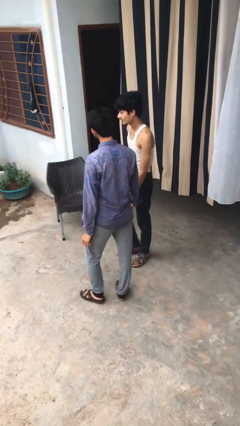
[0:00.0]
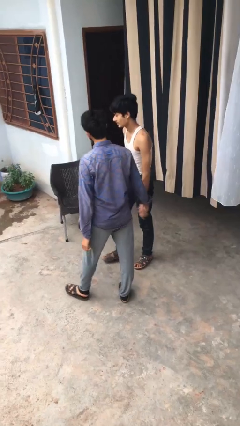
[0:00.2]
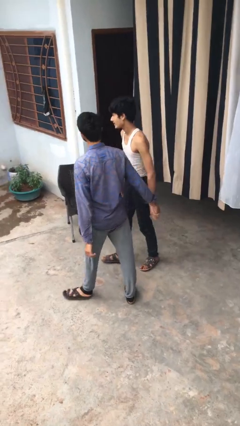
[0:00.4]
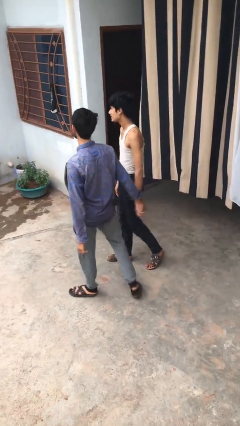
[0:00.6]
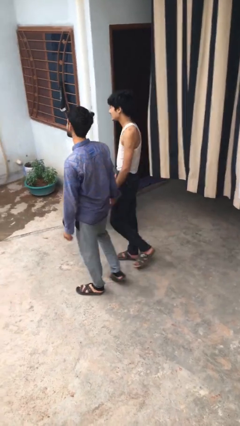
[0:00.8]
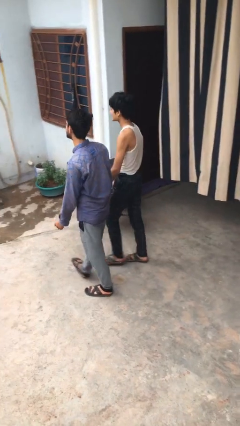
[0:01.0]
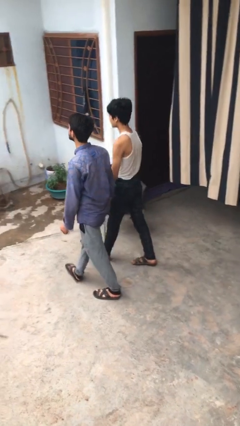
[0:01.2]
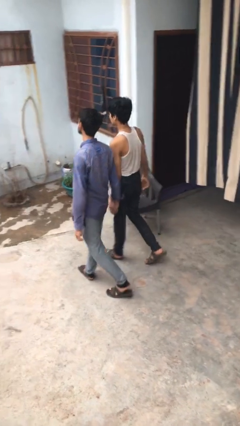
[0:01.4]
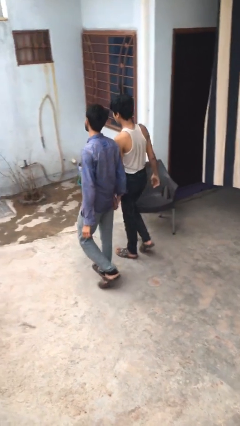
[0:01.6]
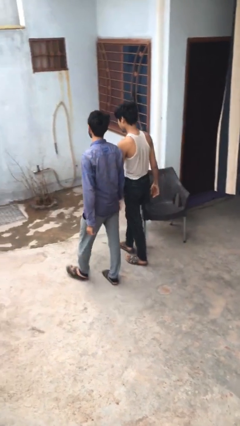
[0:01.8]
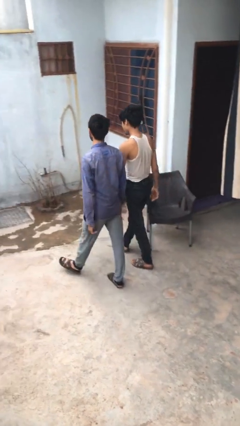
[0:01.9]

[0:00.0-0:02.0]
person holds hand

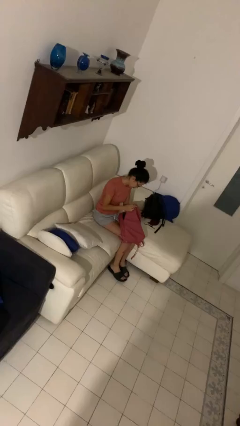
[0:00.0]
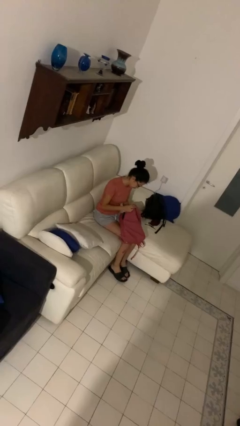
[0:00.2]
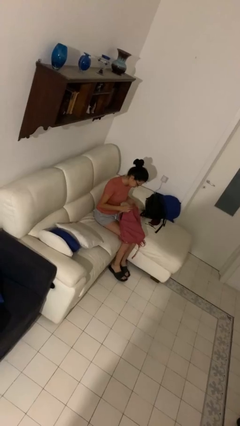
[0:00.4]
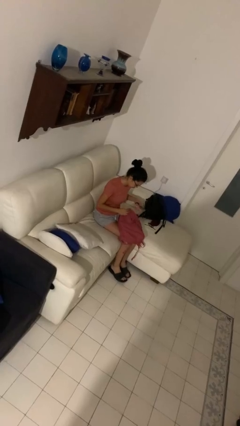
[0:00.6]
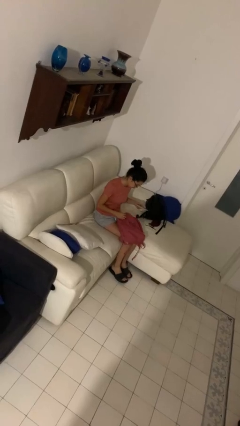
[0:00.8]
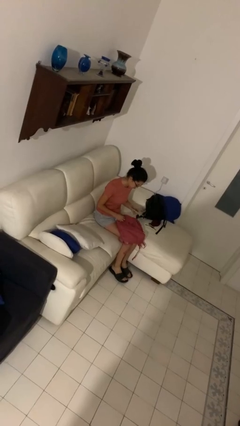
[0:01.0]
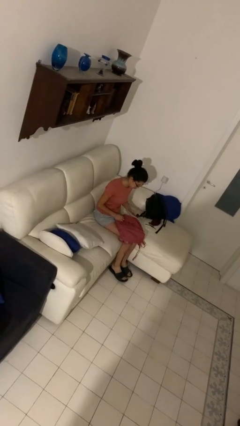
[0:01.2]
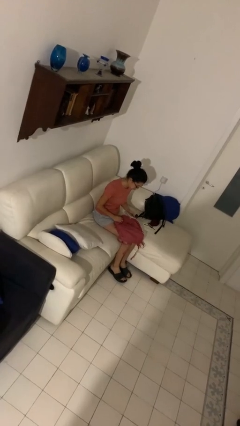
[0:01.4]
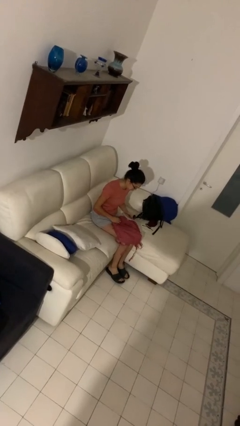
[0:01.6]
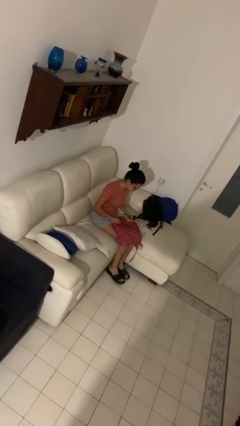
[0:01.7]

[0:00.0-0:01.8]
person takes object from purse

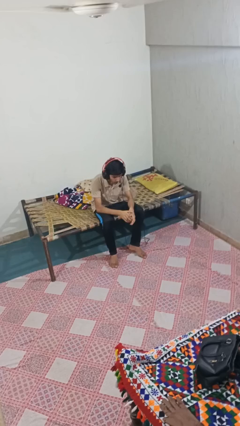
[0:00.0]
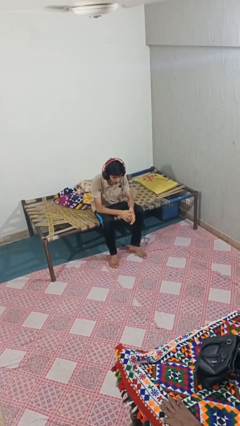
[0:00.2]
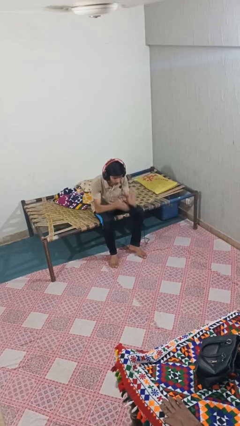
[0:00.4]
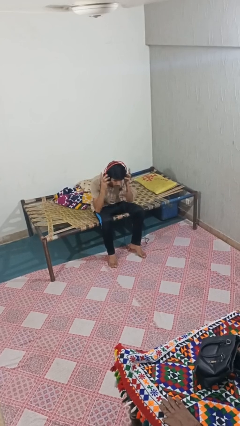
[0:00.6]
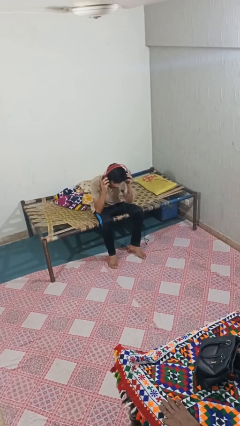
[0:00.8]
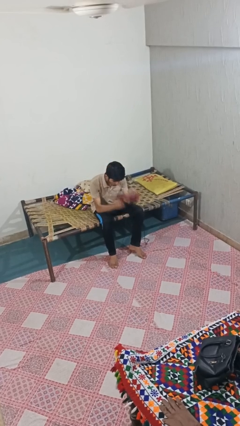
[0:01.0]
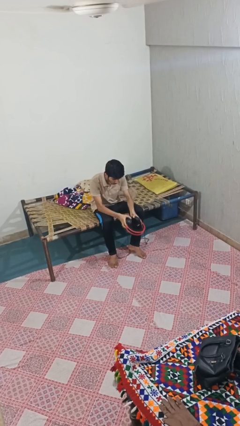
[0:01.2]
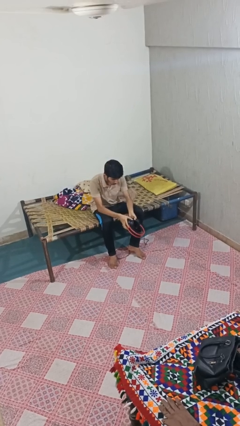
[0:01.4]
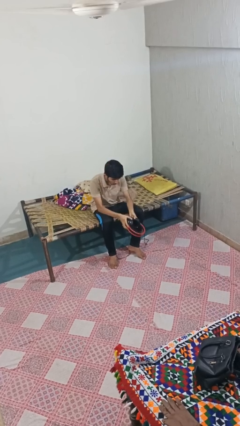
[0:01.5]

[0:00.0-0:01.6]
person takes off headphones

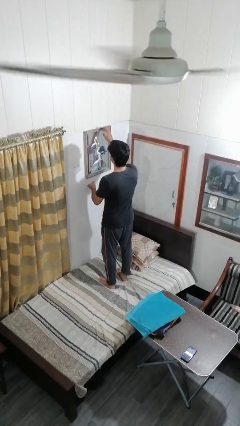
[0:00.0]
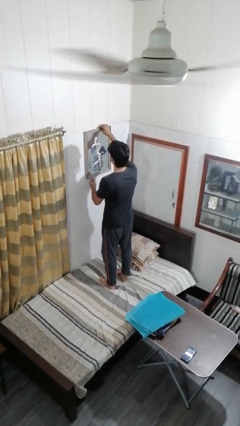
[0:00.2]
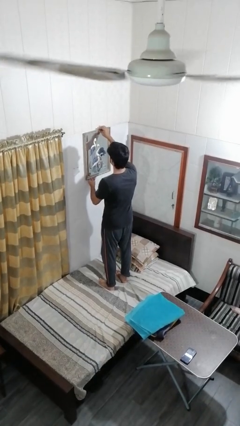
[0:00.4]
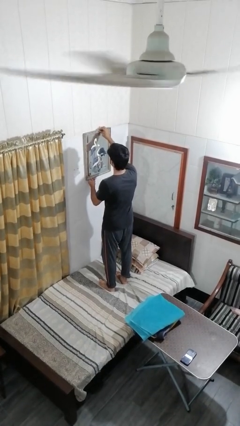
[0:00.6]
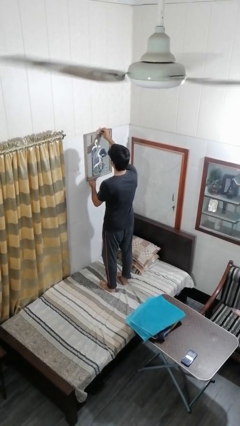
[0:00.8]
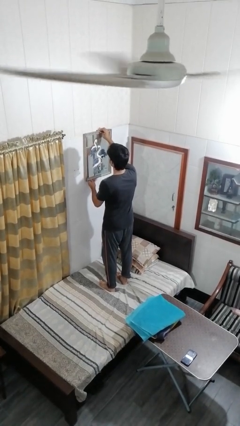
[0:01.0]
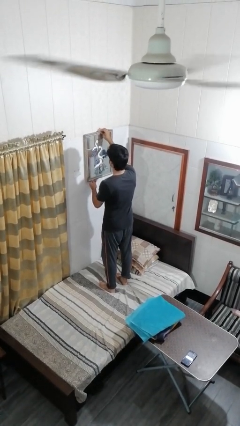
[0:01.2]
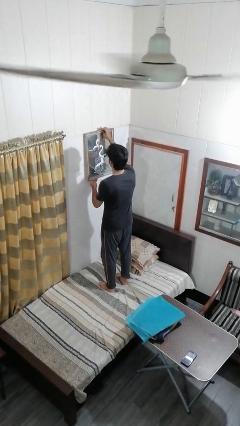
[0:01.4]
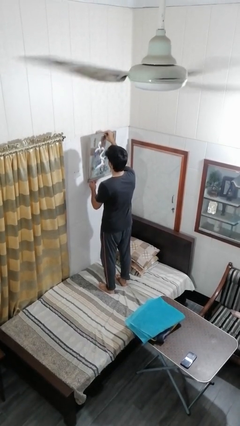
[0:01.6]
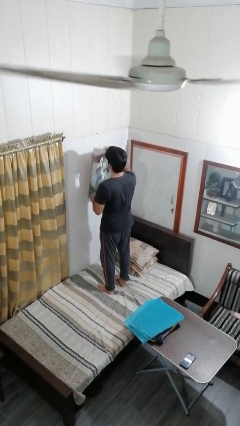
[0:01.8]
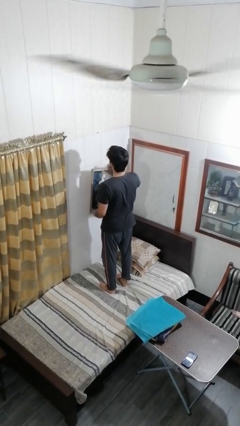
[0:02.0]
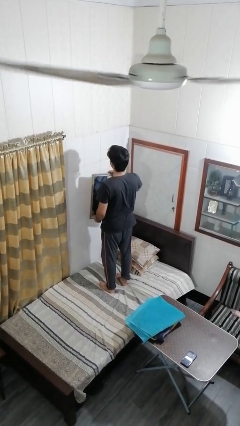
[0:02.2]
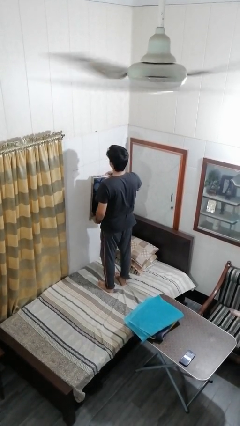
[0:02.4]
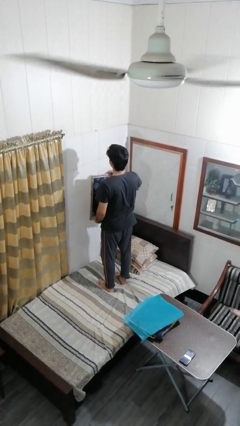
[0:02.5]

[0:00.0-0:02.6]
person takes down picture frame

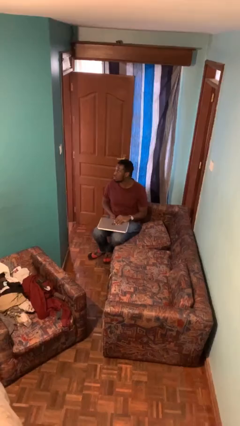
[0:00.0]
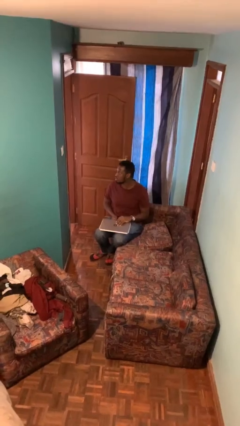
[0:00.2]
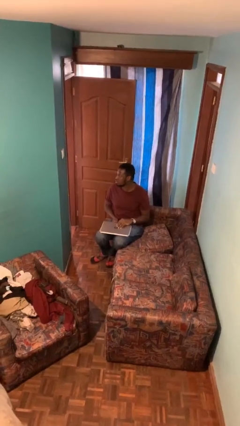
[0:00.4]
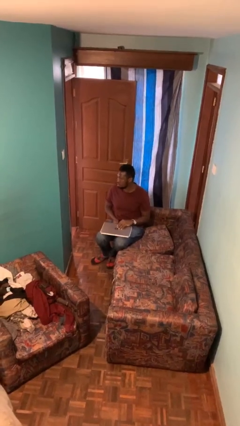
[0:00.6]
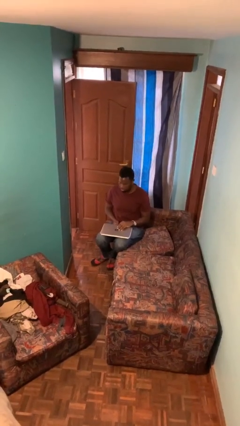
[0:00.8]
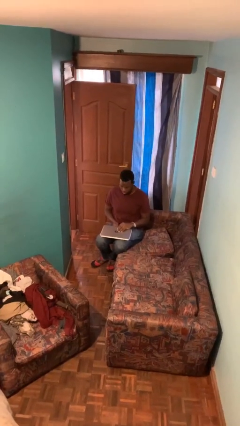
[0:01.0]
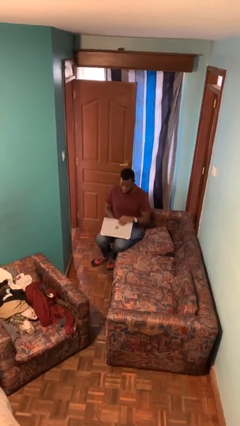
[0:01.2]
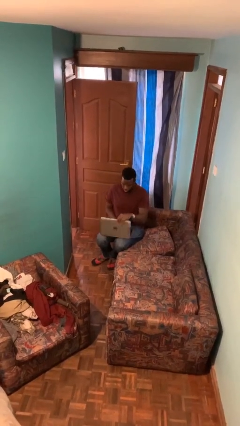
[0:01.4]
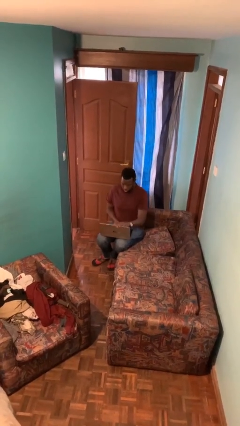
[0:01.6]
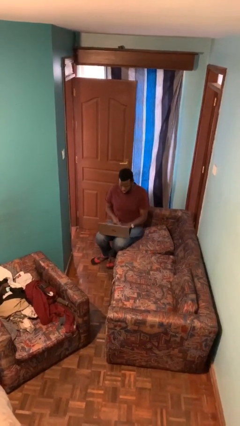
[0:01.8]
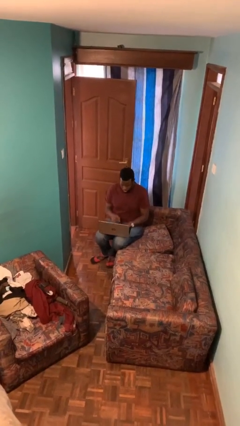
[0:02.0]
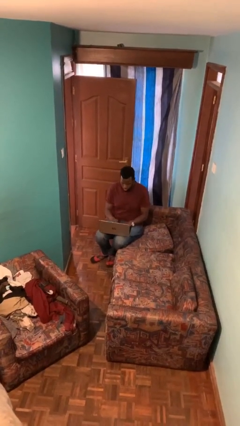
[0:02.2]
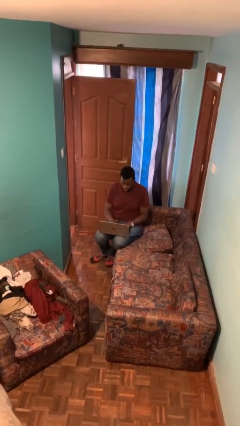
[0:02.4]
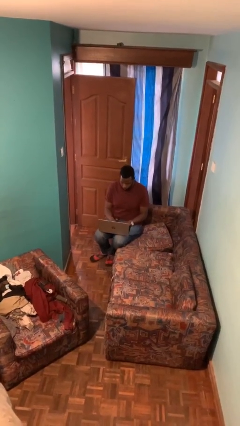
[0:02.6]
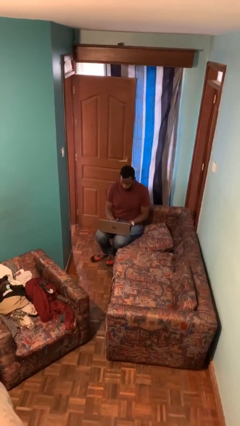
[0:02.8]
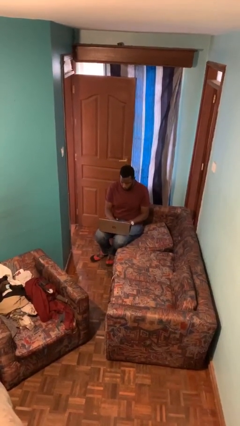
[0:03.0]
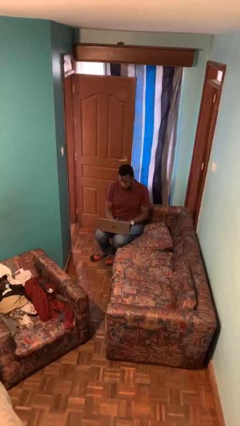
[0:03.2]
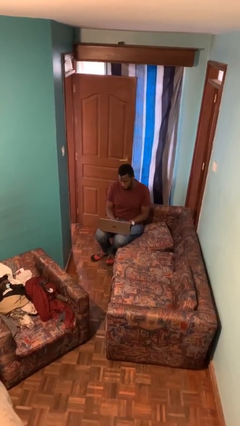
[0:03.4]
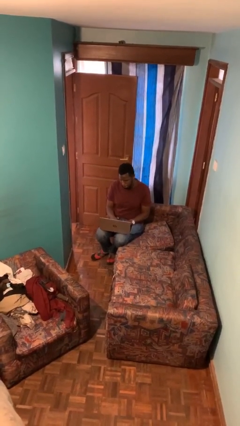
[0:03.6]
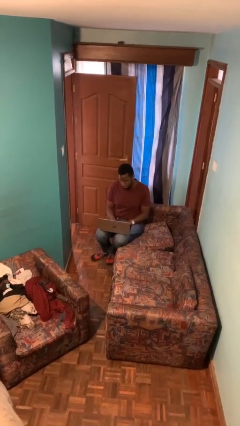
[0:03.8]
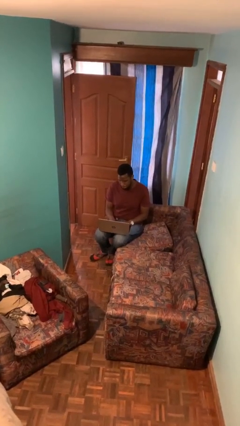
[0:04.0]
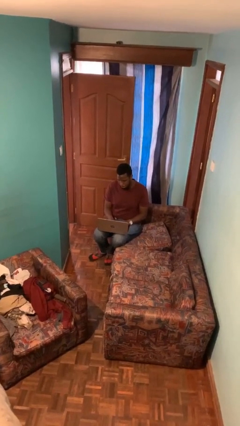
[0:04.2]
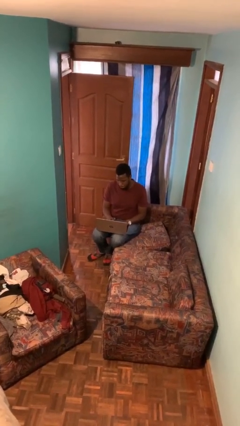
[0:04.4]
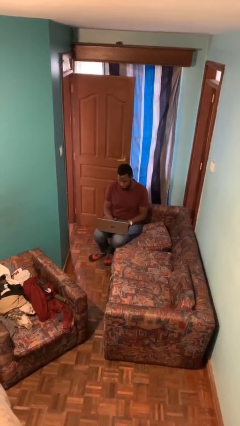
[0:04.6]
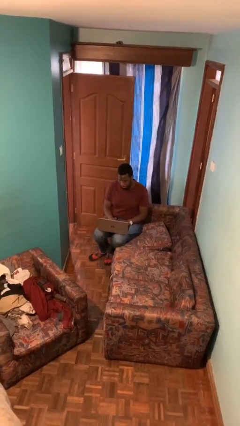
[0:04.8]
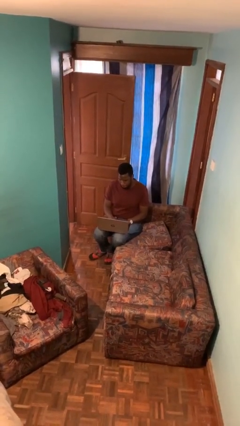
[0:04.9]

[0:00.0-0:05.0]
person interacts with laptop

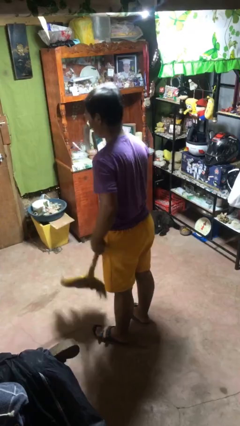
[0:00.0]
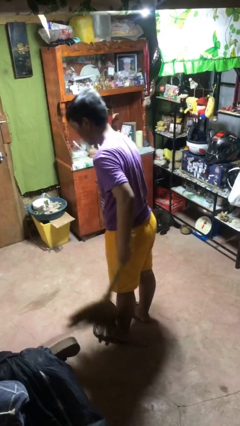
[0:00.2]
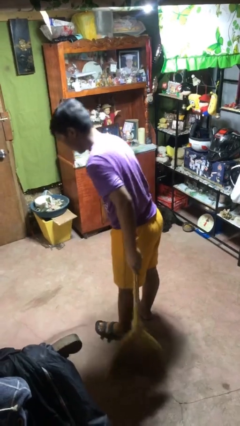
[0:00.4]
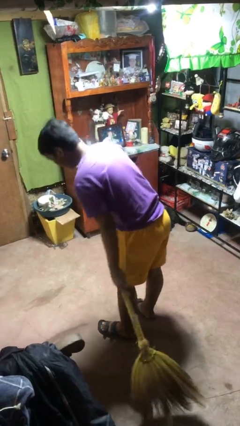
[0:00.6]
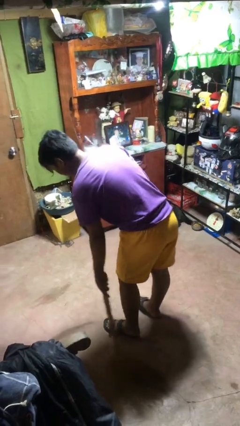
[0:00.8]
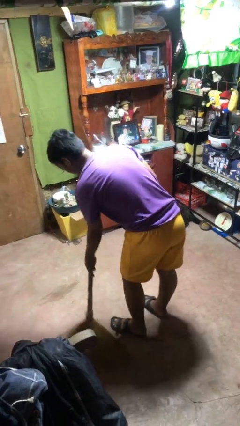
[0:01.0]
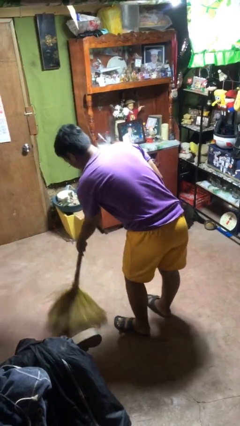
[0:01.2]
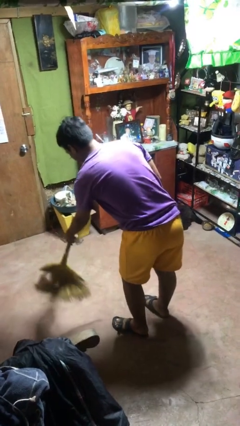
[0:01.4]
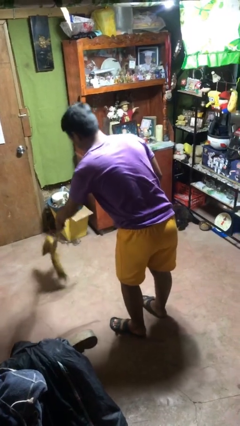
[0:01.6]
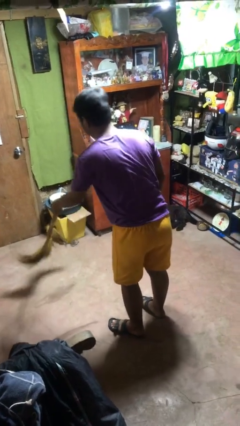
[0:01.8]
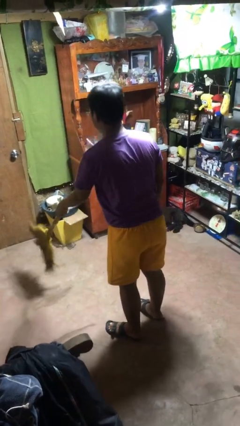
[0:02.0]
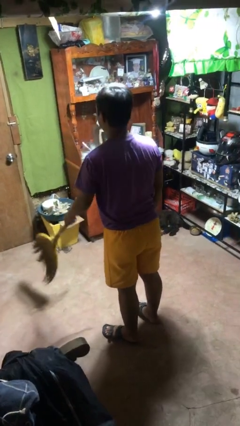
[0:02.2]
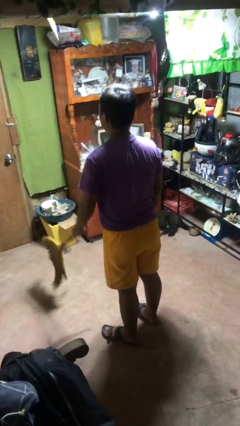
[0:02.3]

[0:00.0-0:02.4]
person sweeps floor

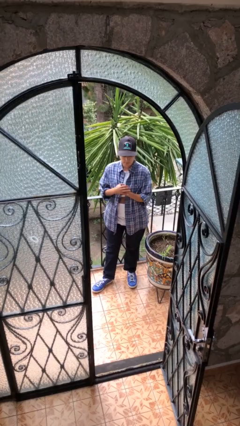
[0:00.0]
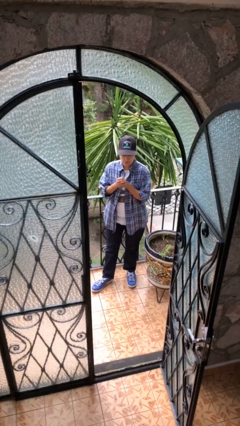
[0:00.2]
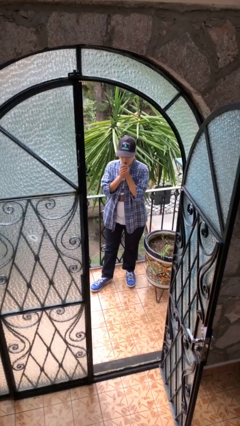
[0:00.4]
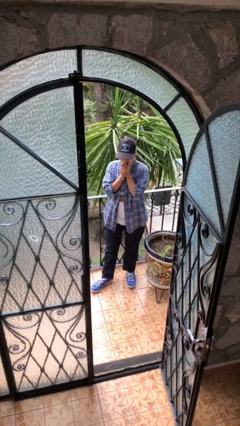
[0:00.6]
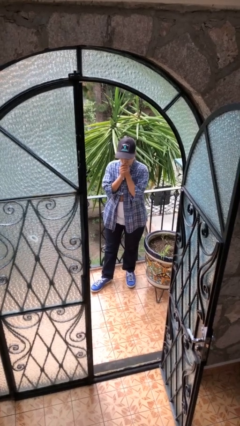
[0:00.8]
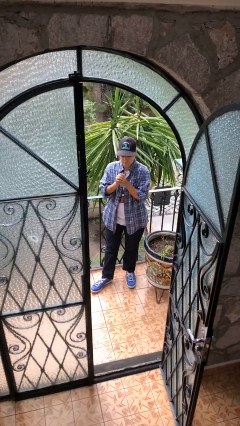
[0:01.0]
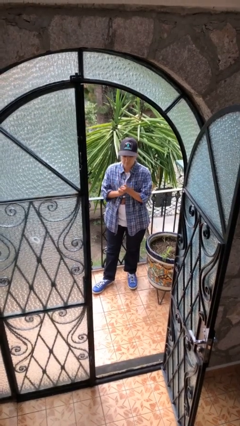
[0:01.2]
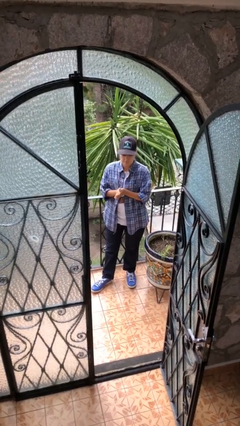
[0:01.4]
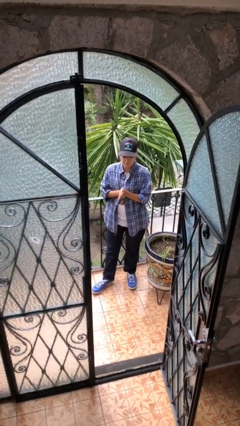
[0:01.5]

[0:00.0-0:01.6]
person blows into hands

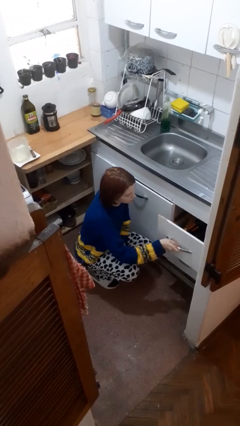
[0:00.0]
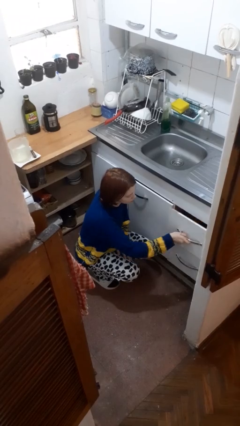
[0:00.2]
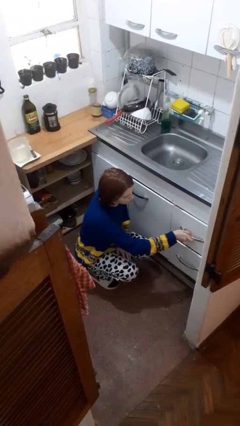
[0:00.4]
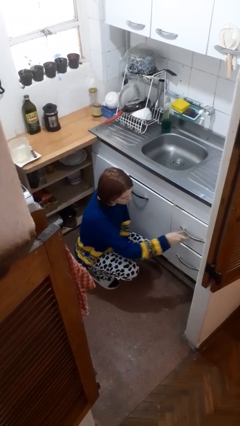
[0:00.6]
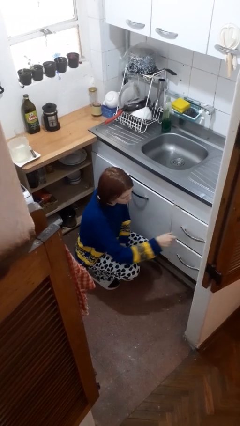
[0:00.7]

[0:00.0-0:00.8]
person closes kitchen drawer
